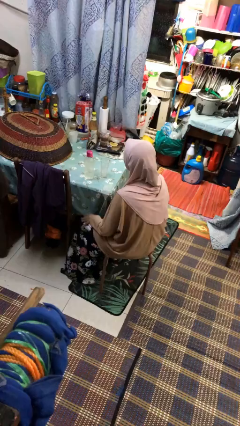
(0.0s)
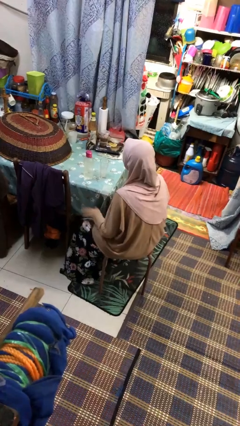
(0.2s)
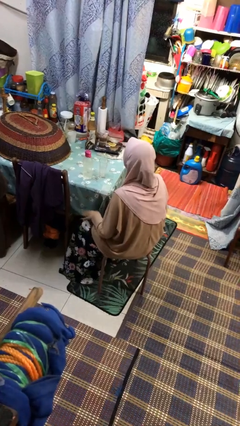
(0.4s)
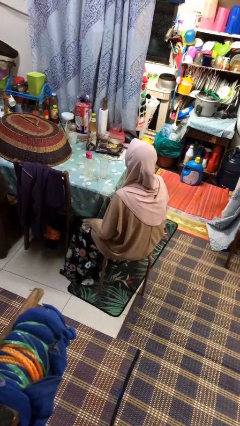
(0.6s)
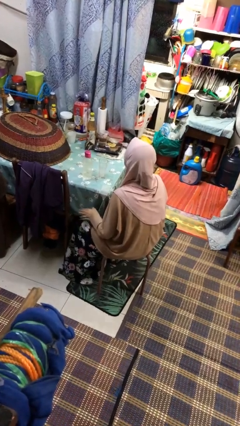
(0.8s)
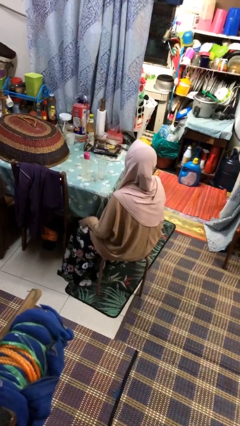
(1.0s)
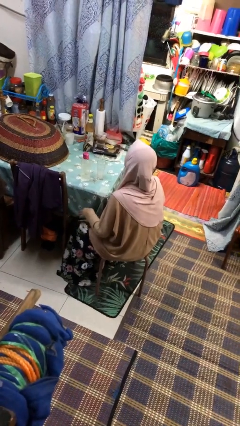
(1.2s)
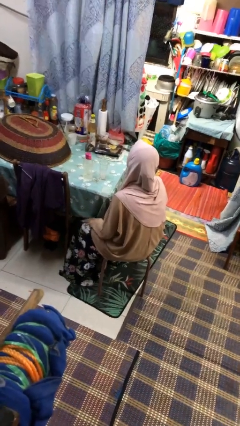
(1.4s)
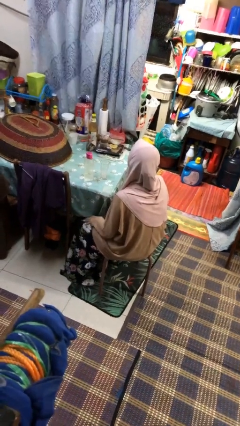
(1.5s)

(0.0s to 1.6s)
person slaps hands on thighs

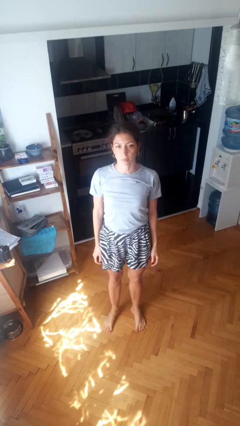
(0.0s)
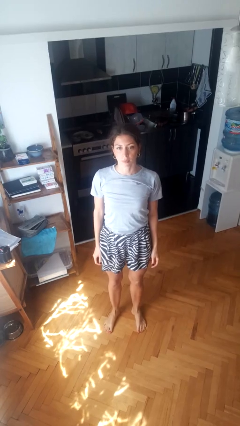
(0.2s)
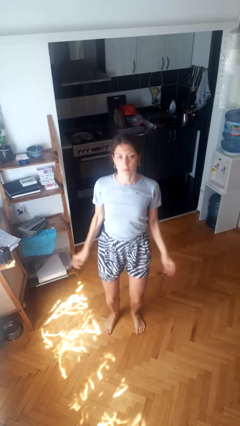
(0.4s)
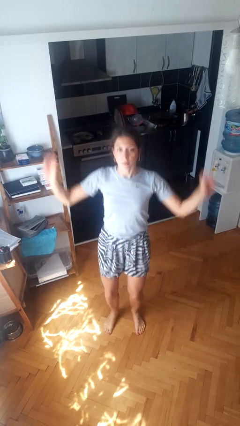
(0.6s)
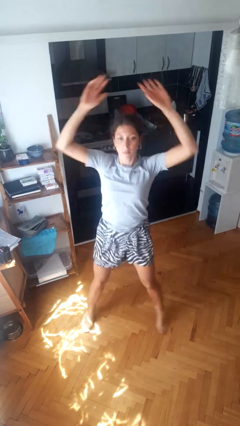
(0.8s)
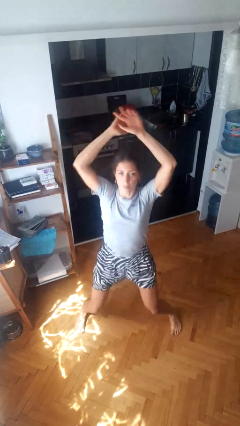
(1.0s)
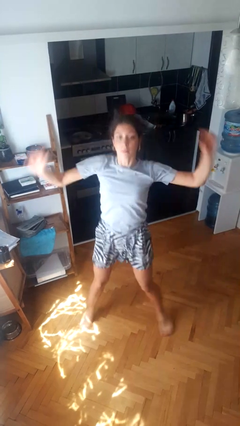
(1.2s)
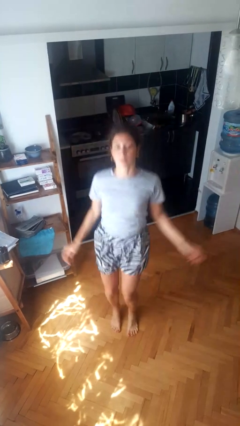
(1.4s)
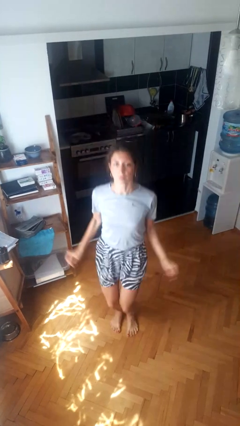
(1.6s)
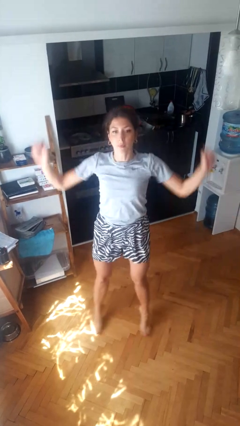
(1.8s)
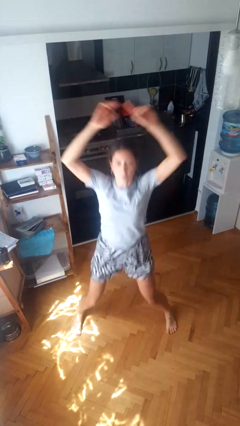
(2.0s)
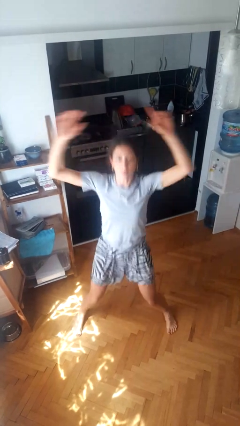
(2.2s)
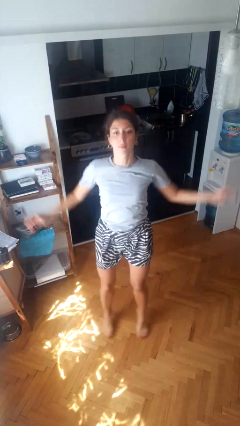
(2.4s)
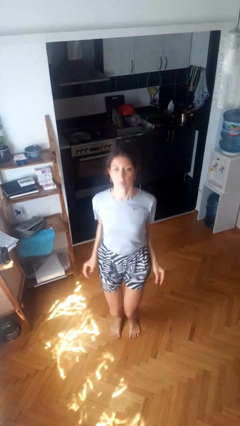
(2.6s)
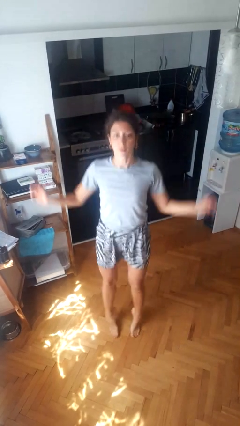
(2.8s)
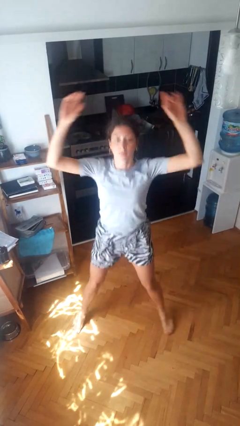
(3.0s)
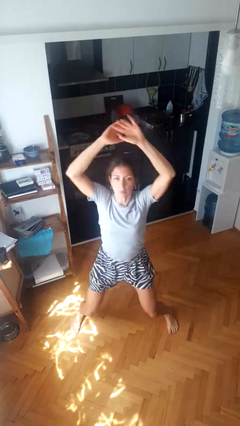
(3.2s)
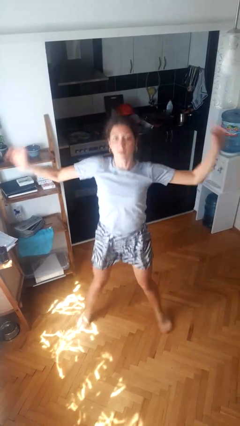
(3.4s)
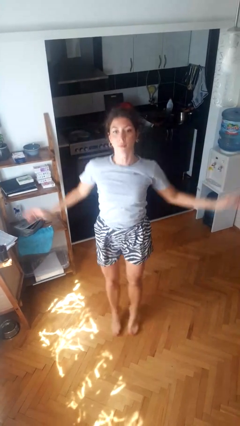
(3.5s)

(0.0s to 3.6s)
person exercises with jumping jacks

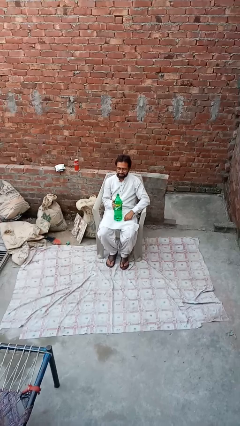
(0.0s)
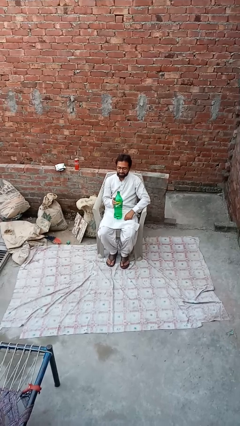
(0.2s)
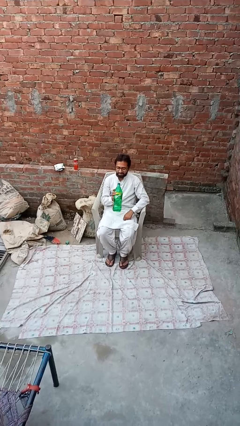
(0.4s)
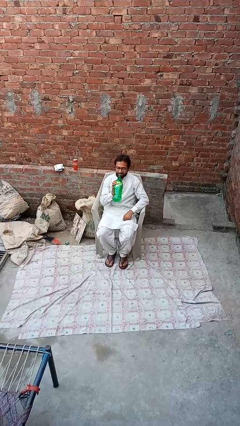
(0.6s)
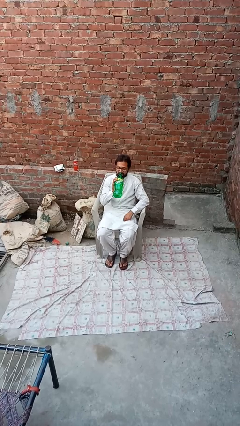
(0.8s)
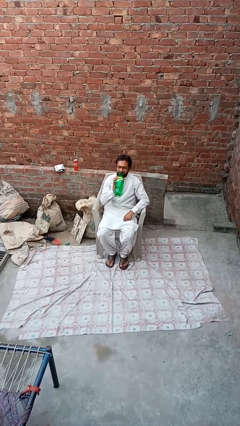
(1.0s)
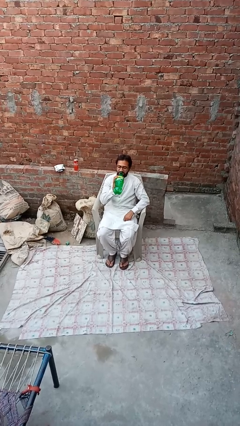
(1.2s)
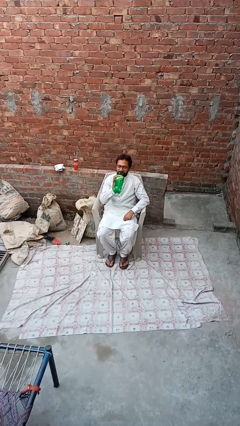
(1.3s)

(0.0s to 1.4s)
person drinks from bottle

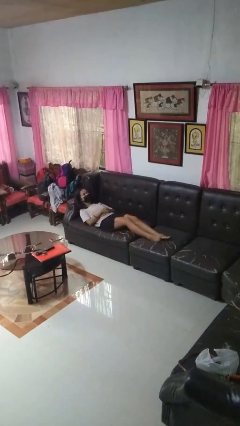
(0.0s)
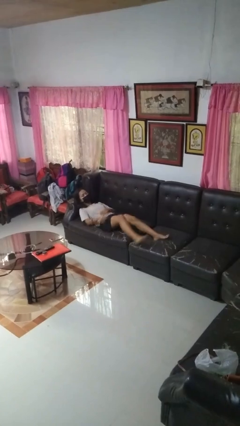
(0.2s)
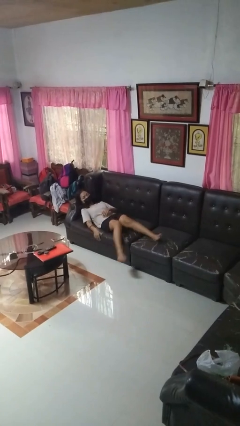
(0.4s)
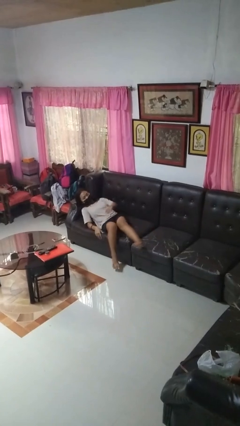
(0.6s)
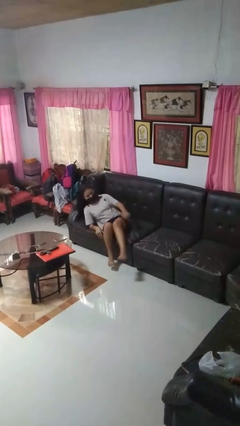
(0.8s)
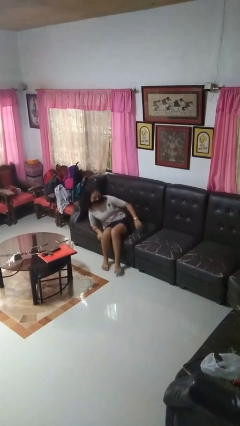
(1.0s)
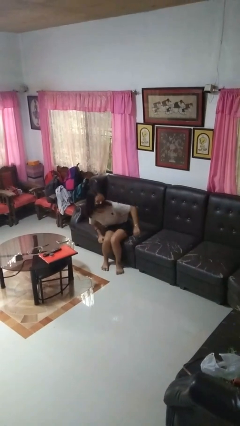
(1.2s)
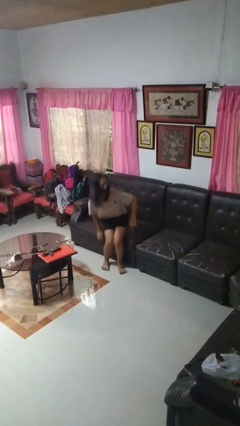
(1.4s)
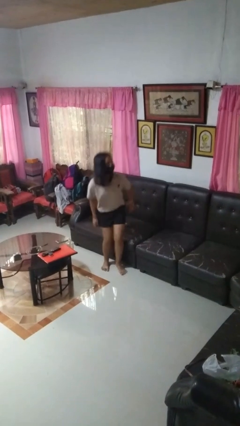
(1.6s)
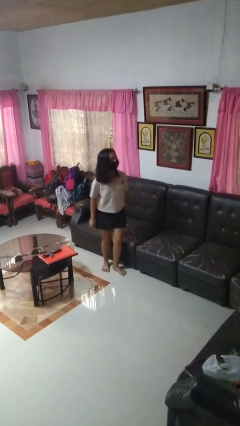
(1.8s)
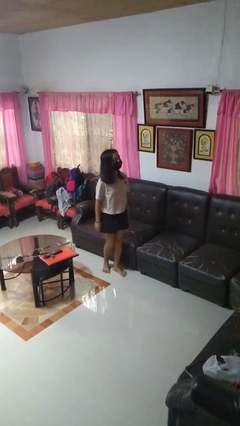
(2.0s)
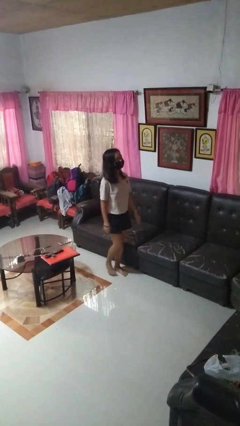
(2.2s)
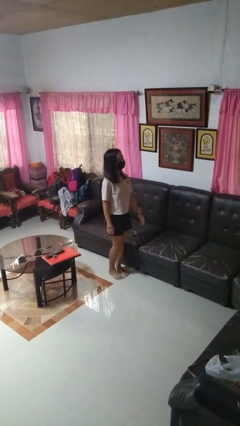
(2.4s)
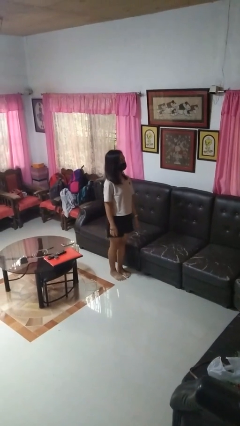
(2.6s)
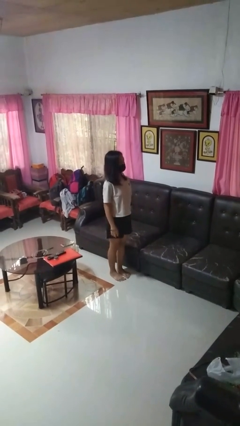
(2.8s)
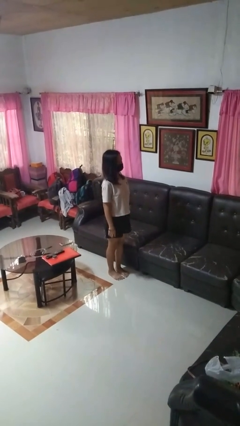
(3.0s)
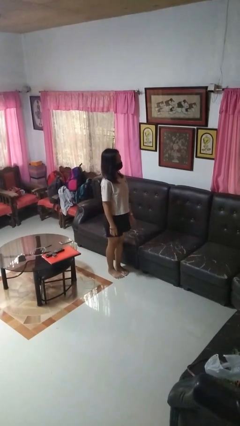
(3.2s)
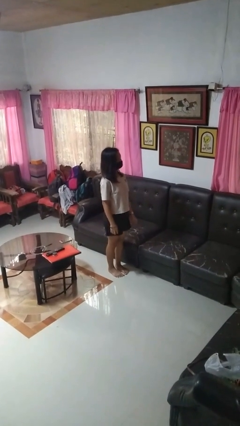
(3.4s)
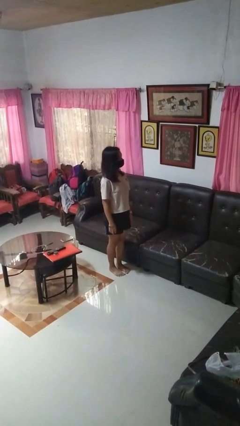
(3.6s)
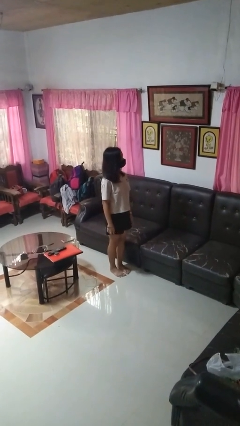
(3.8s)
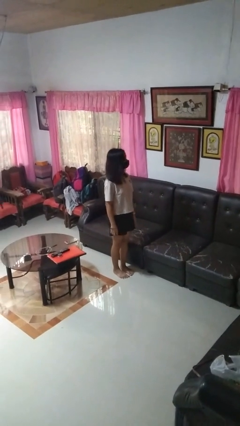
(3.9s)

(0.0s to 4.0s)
person stands up

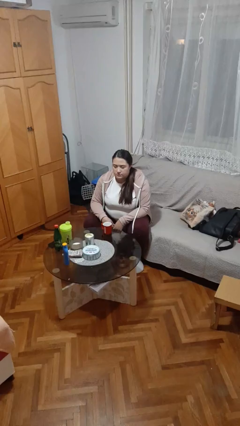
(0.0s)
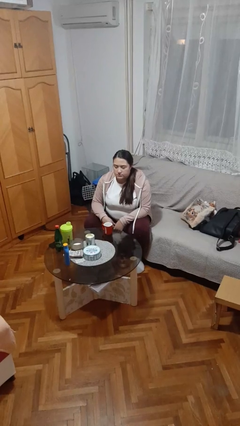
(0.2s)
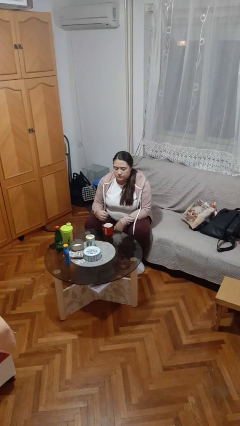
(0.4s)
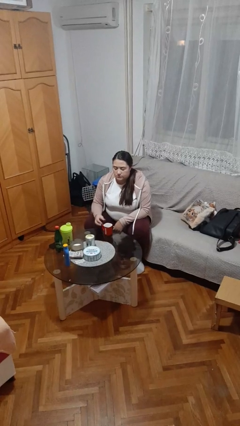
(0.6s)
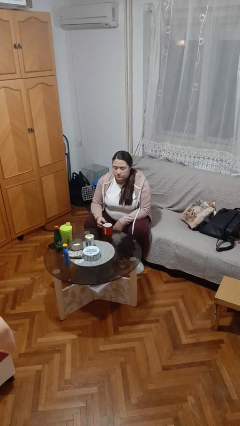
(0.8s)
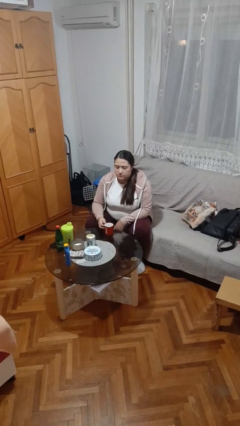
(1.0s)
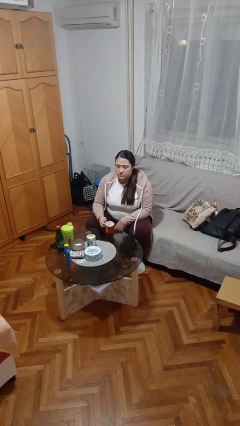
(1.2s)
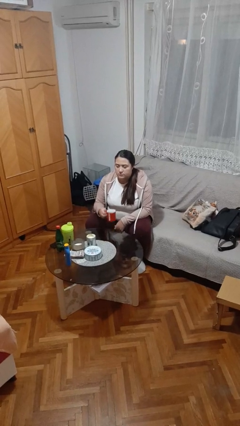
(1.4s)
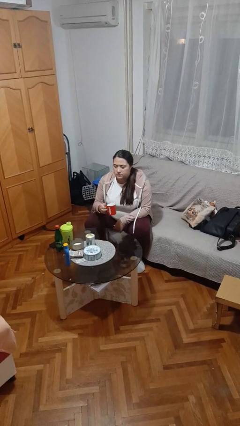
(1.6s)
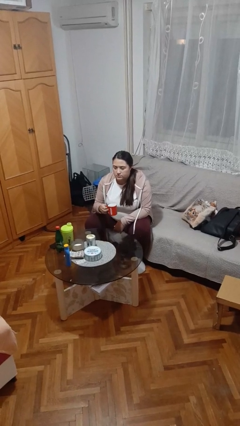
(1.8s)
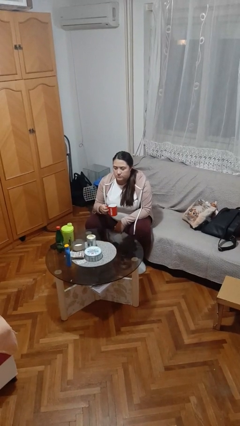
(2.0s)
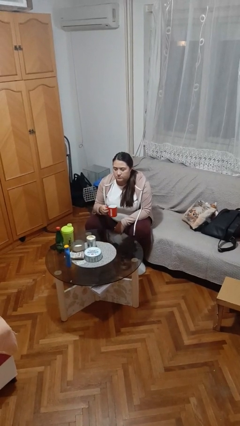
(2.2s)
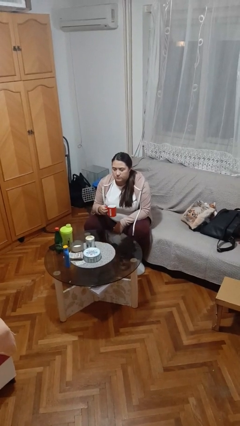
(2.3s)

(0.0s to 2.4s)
person picks up object from table

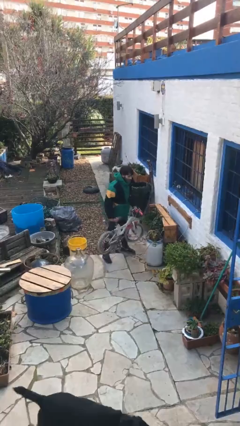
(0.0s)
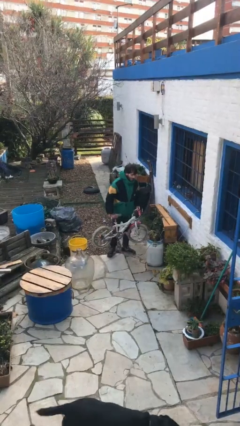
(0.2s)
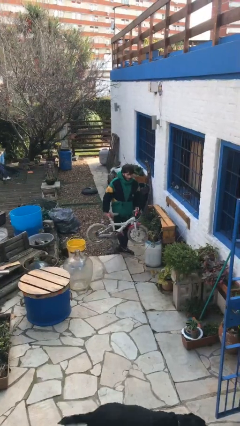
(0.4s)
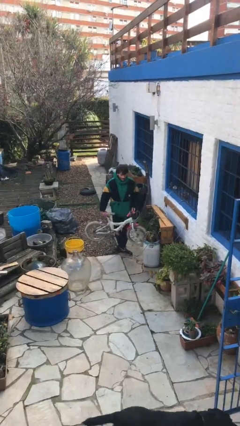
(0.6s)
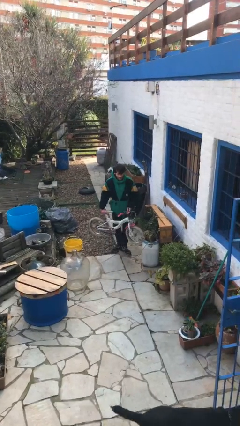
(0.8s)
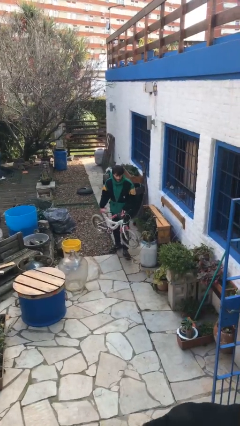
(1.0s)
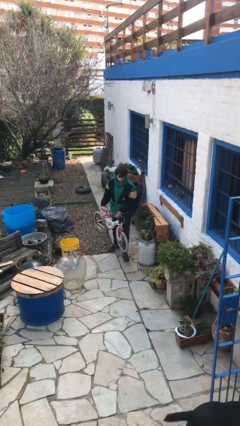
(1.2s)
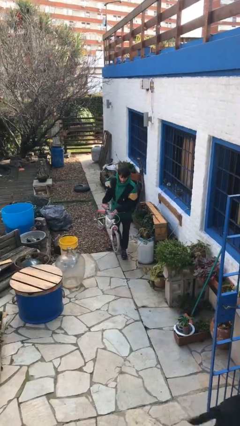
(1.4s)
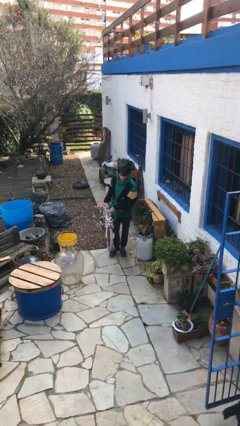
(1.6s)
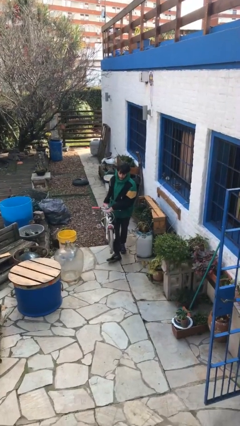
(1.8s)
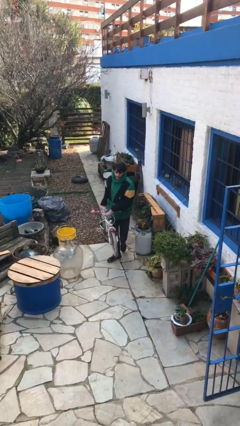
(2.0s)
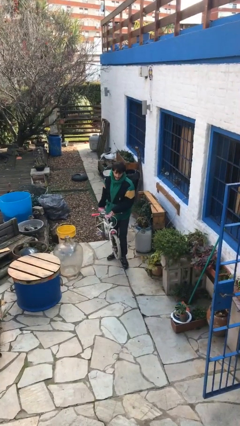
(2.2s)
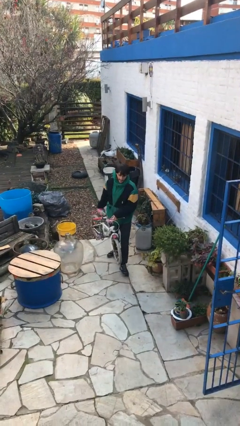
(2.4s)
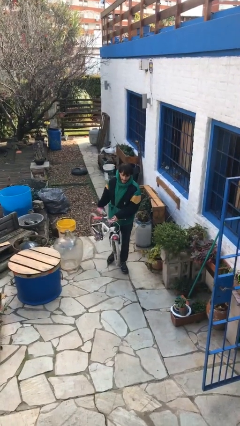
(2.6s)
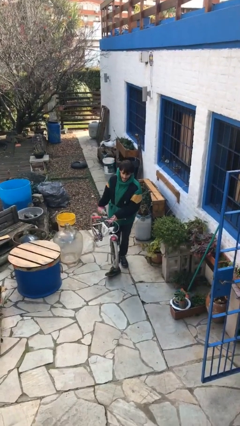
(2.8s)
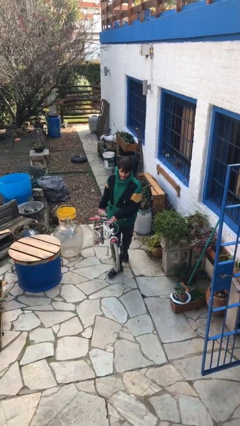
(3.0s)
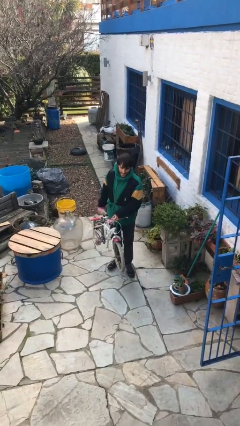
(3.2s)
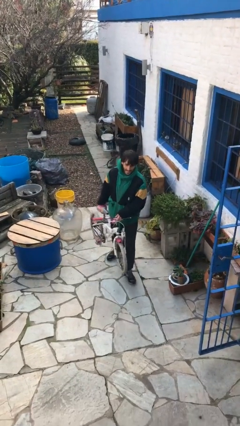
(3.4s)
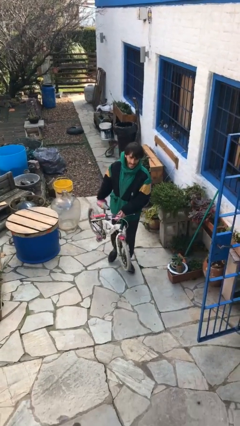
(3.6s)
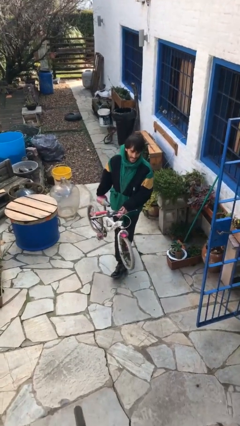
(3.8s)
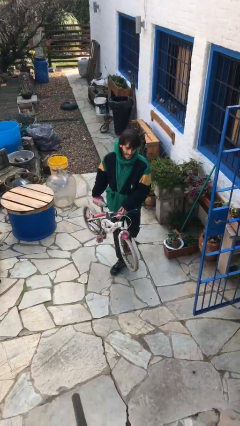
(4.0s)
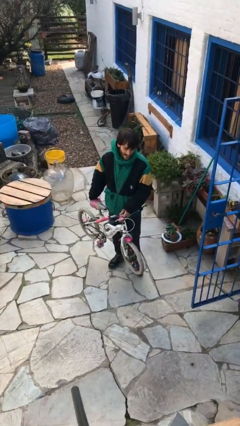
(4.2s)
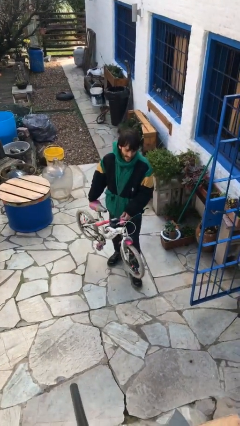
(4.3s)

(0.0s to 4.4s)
person carries bicycle
